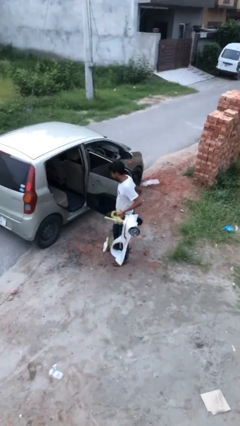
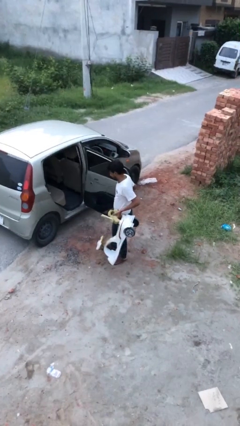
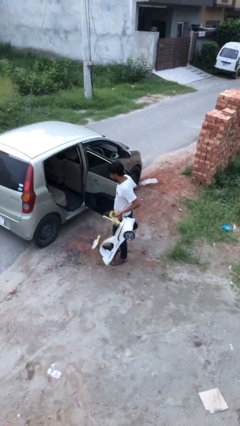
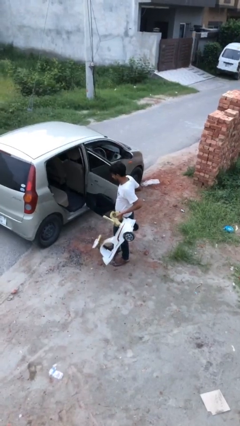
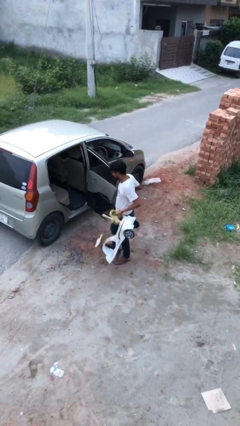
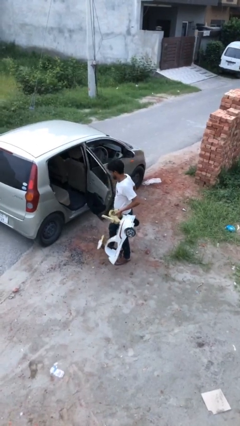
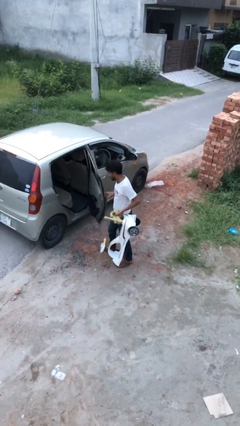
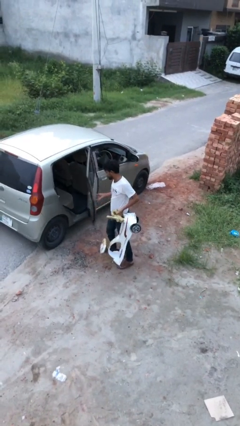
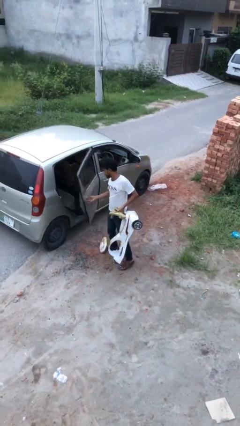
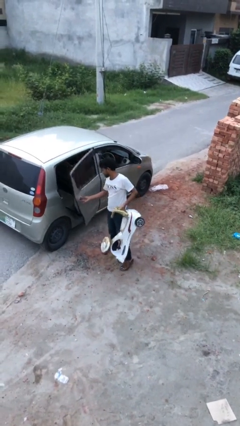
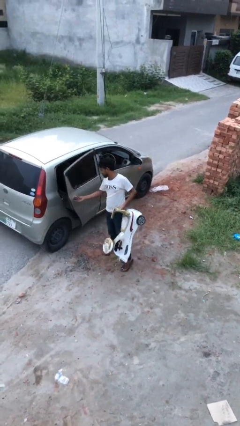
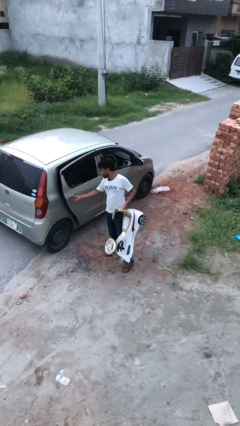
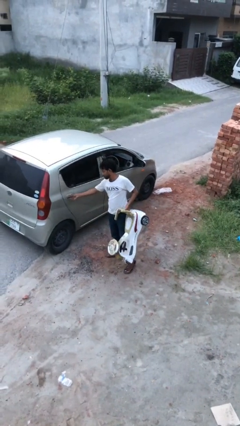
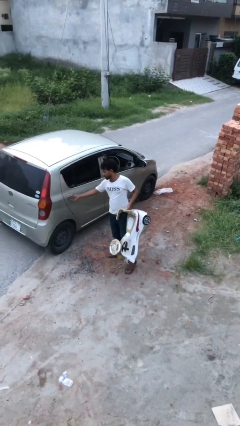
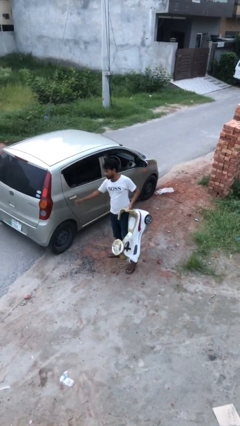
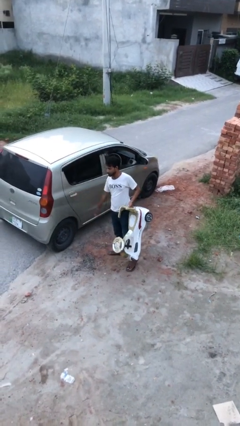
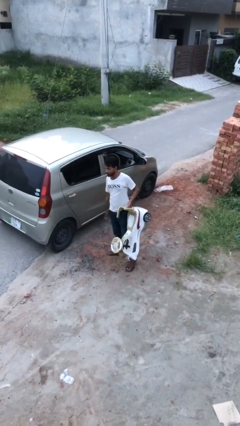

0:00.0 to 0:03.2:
person closes car door

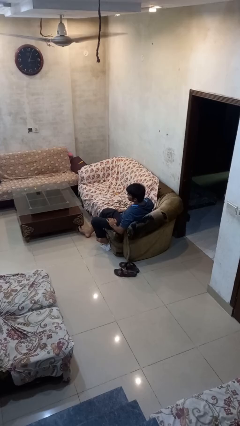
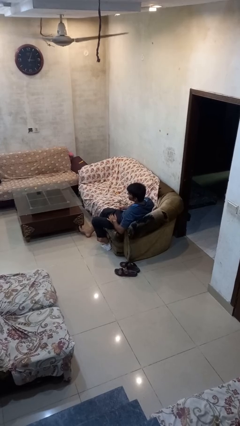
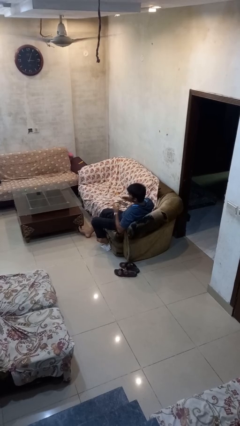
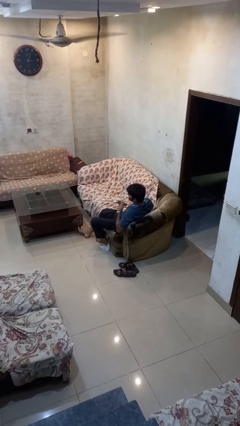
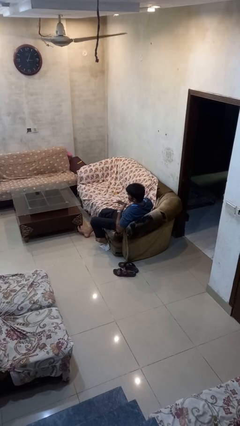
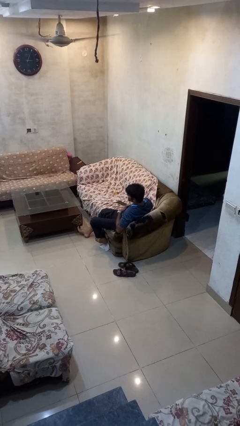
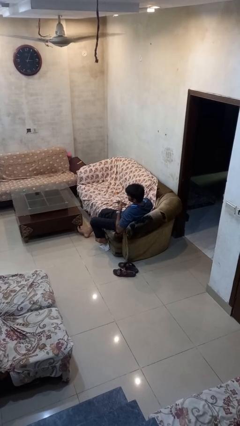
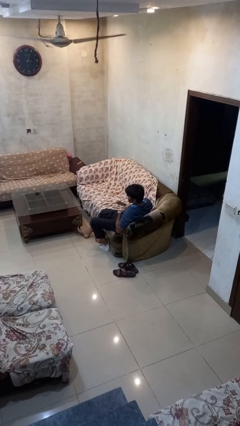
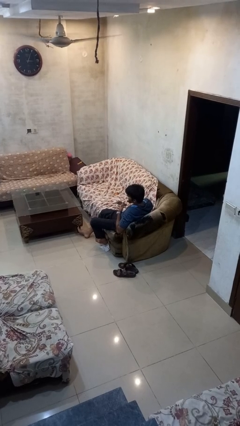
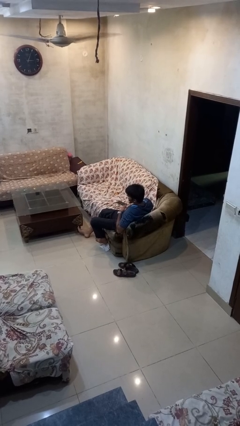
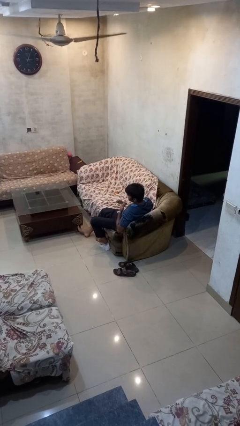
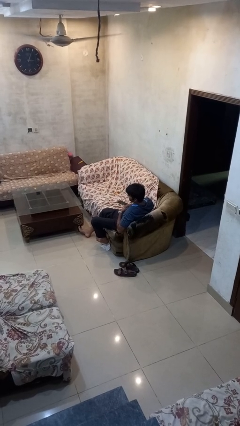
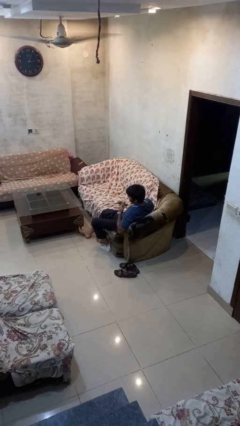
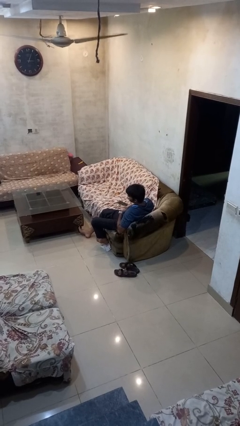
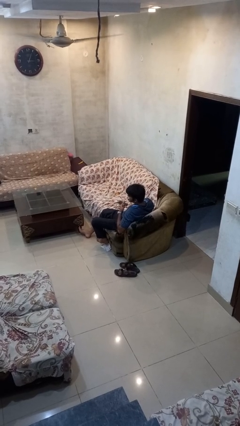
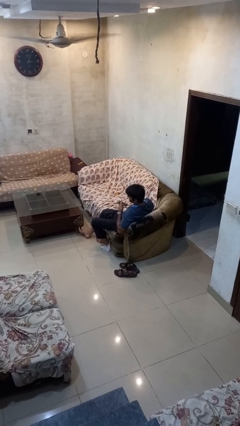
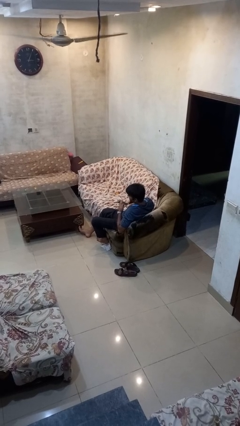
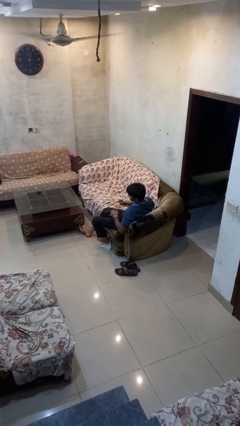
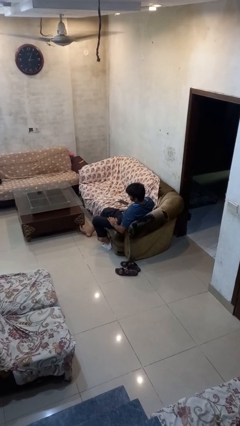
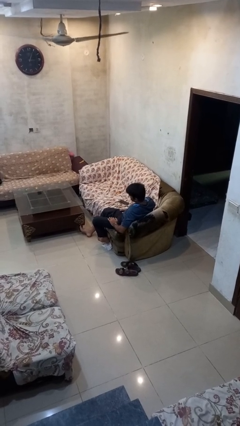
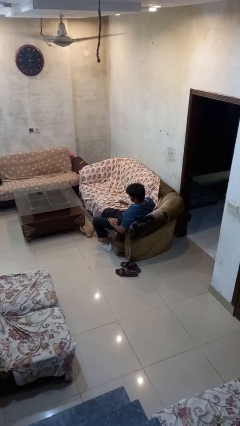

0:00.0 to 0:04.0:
person drums on chest

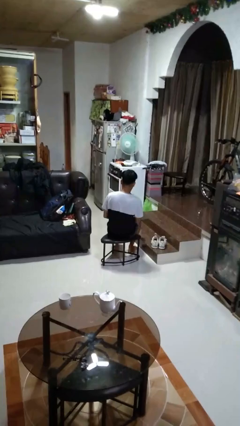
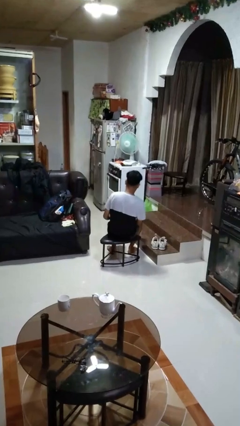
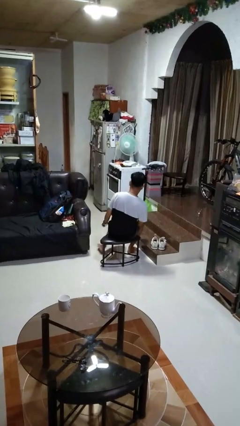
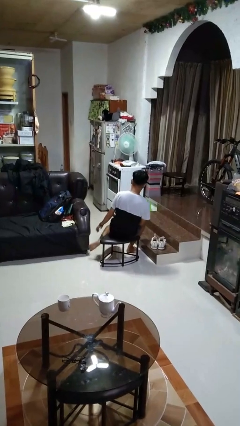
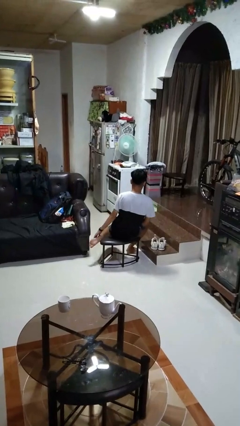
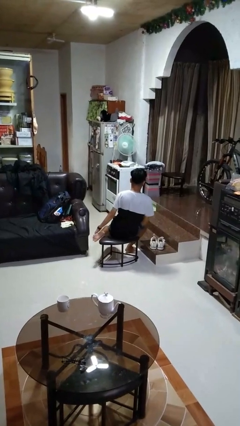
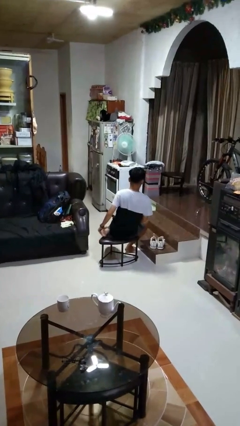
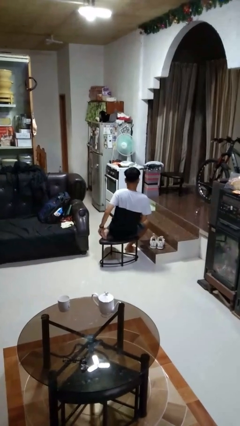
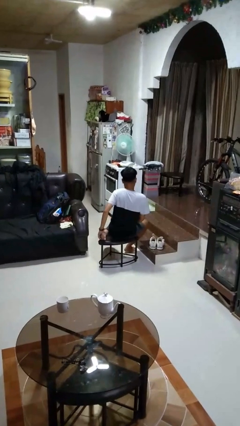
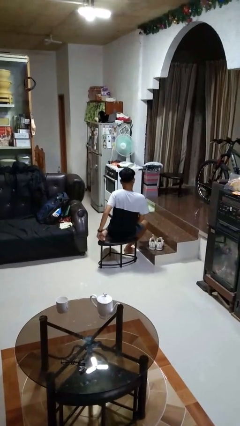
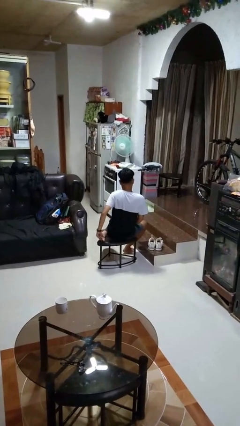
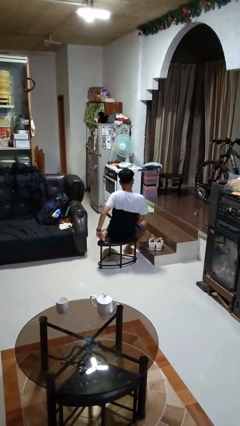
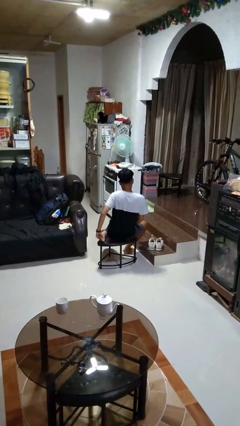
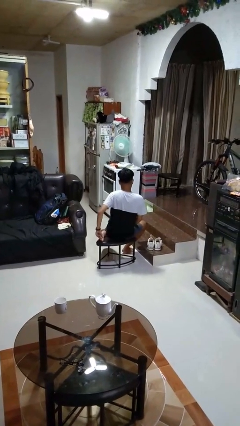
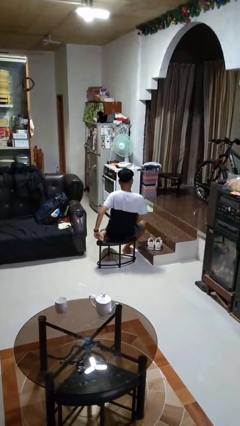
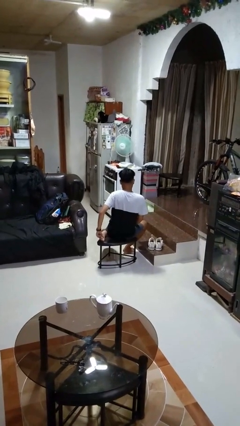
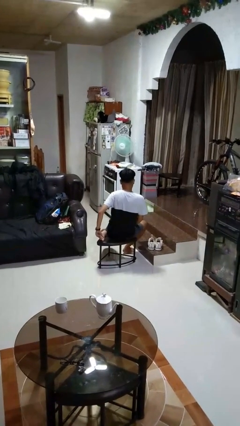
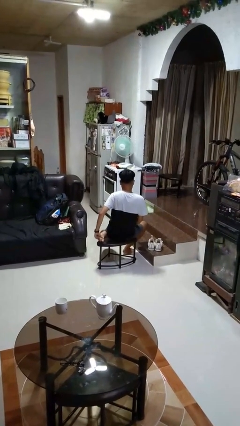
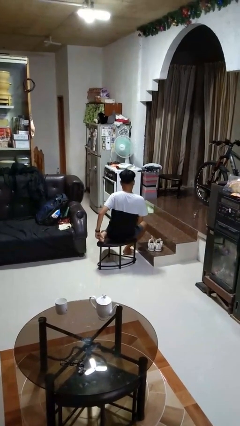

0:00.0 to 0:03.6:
person rubs foot

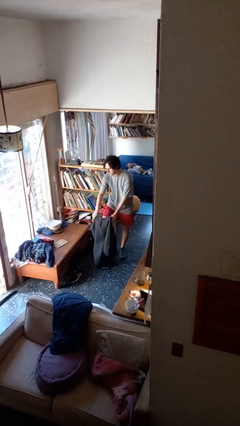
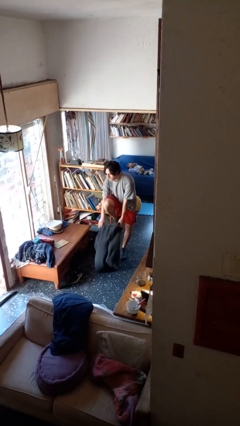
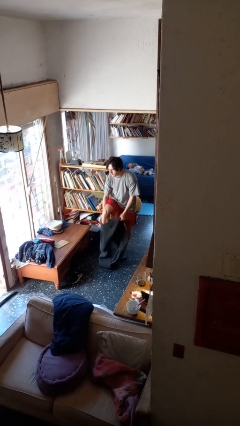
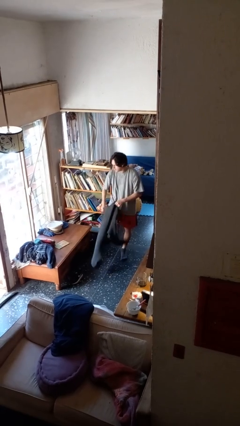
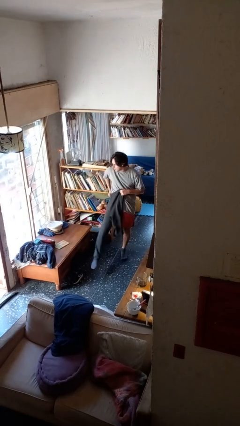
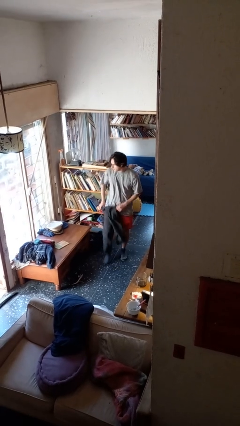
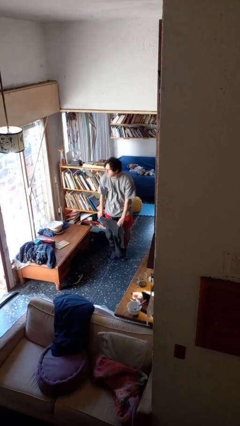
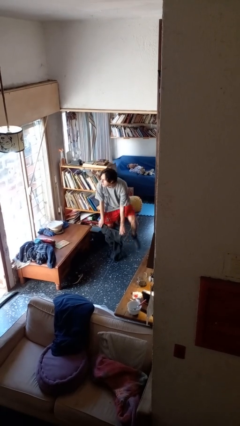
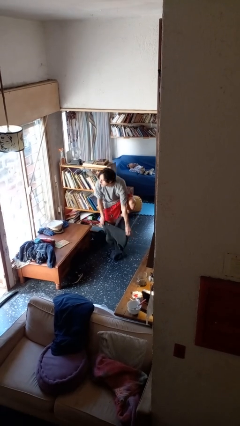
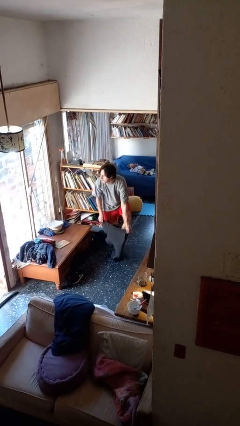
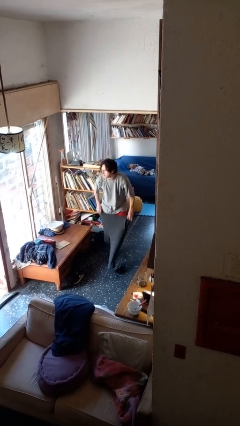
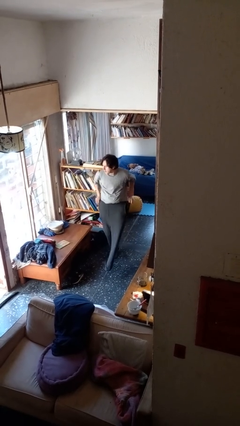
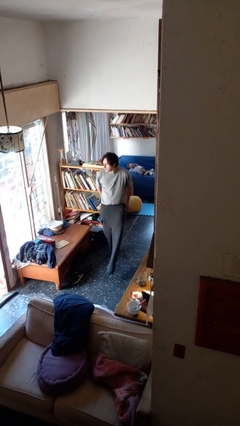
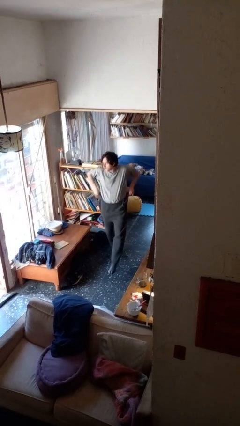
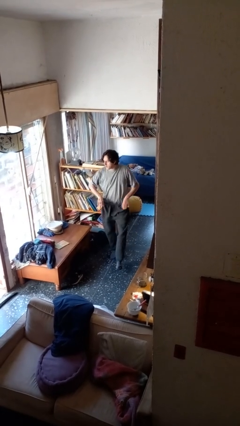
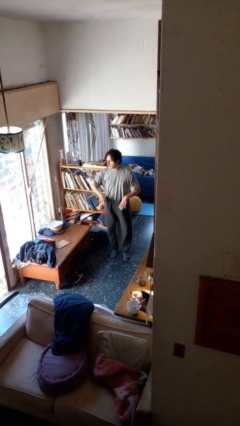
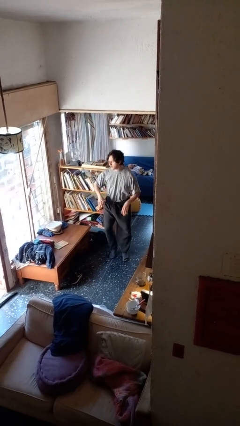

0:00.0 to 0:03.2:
person takes off pants

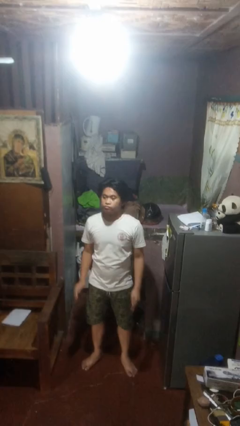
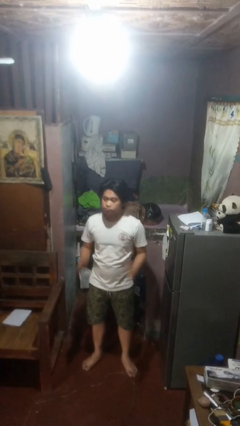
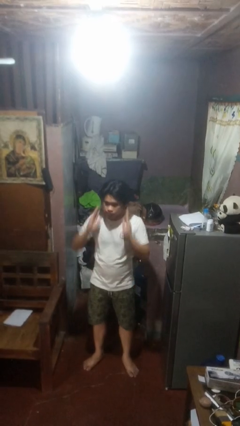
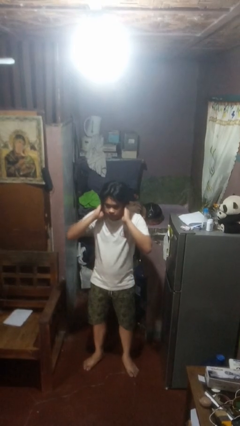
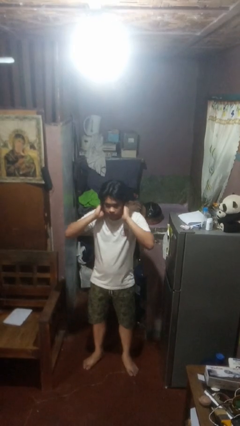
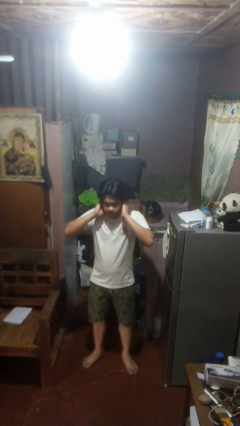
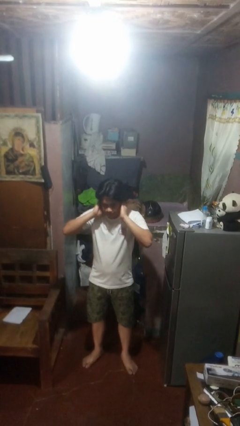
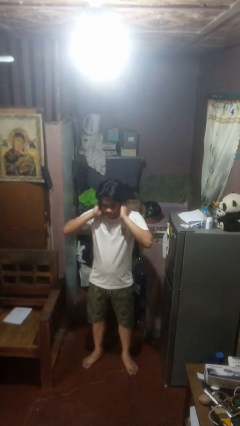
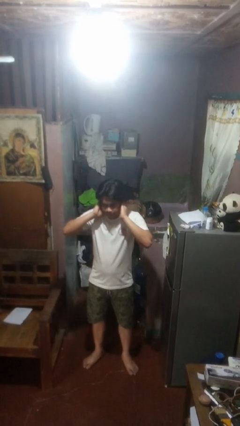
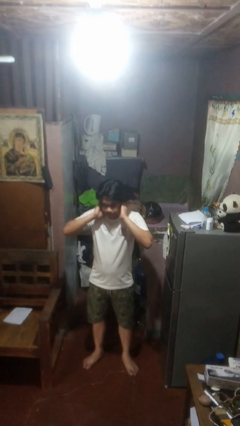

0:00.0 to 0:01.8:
person puts fingers in ear

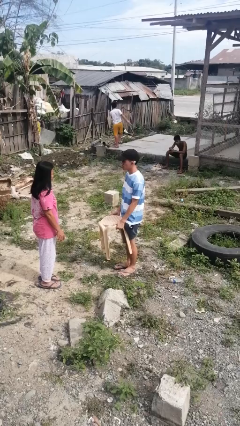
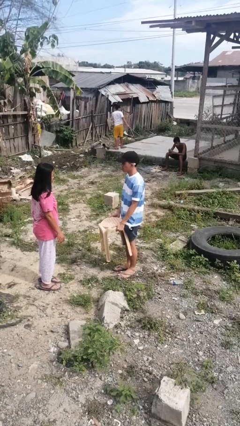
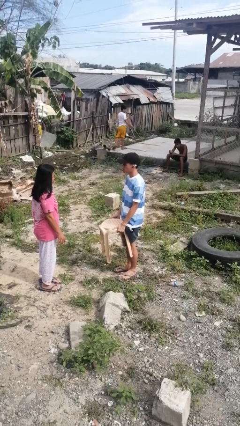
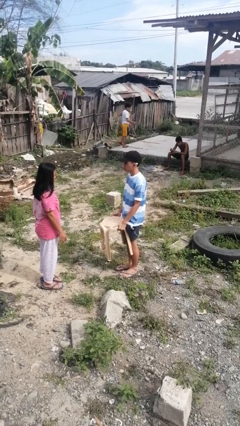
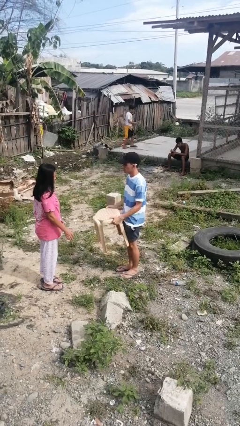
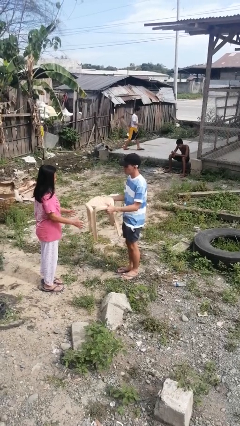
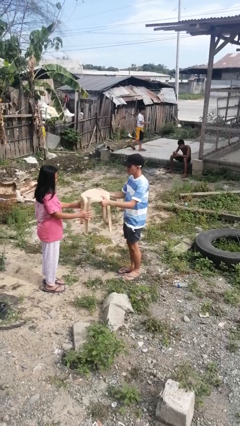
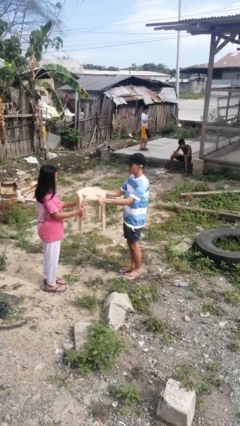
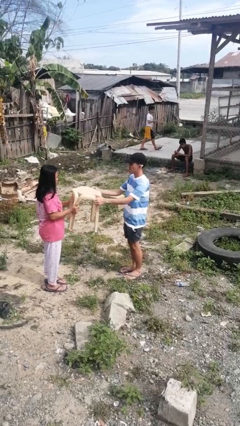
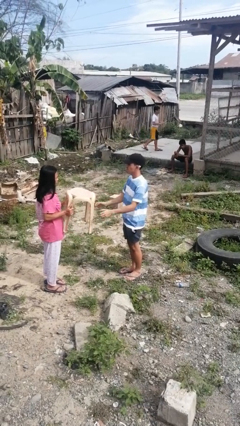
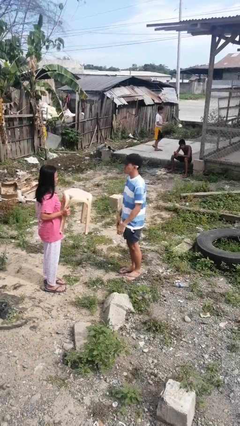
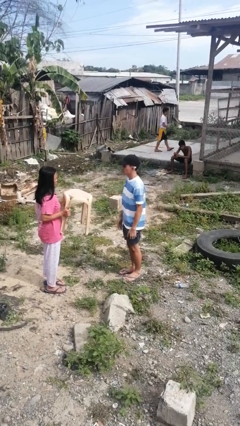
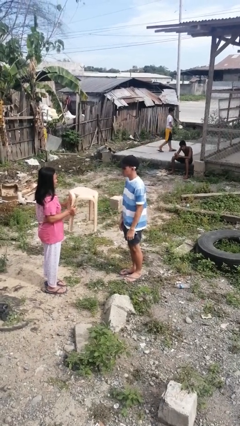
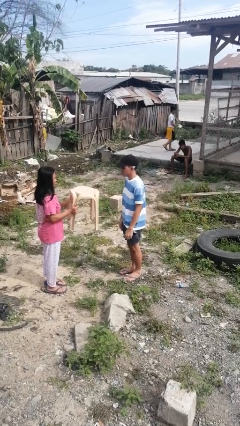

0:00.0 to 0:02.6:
person transfers object to person
